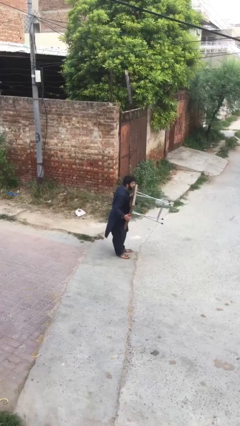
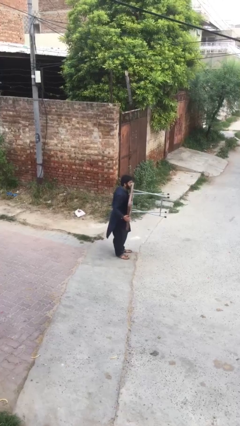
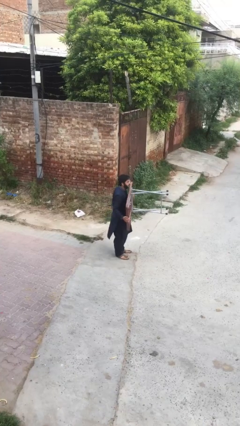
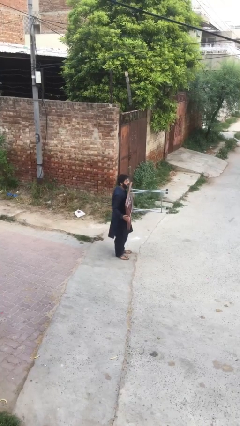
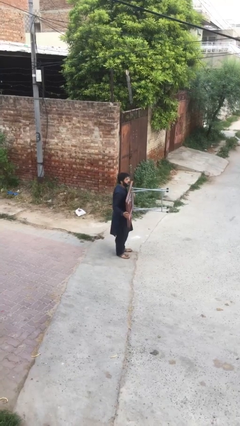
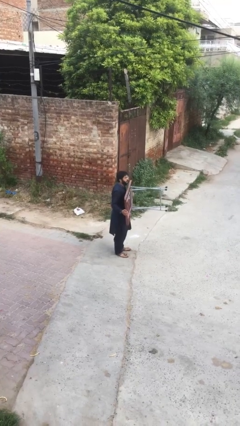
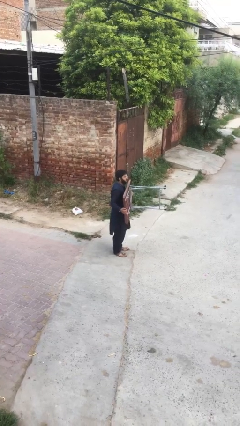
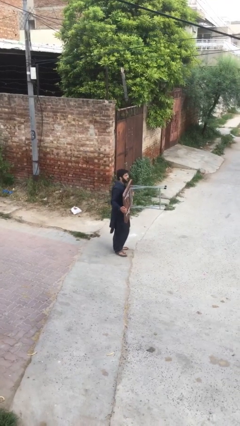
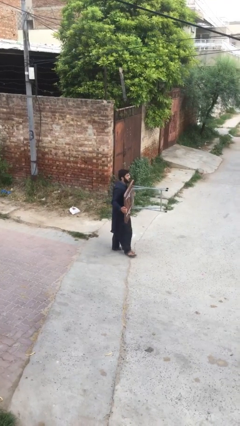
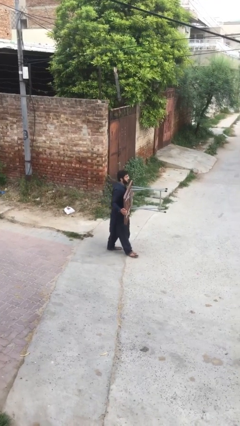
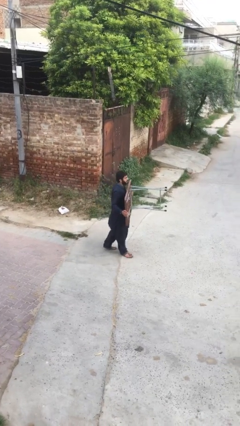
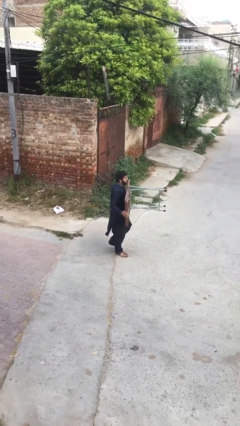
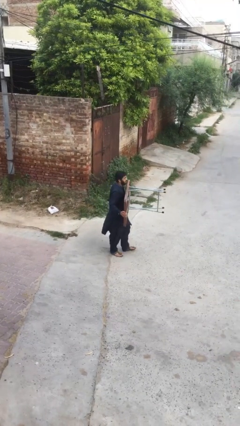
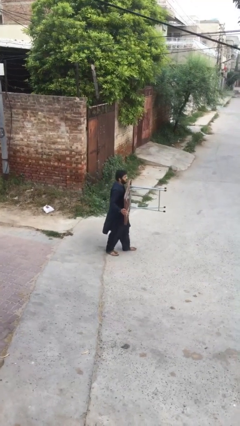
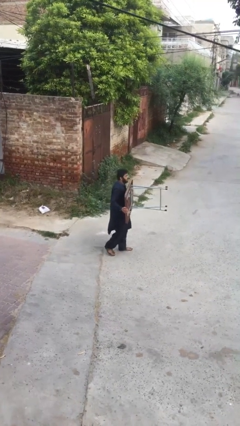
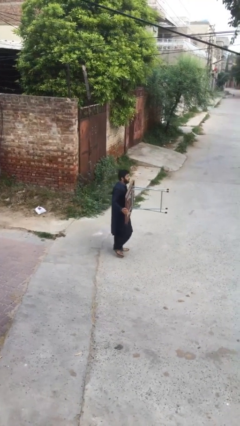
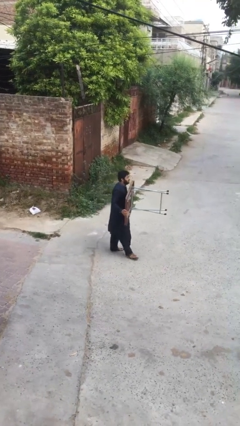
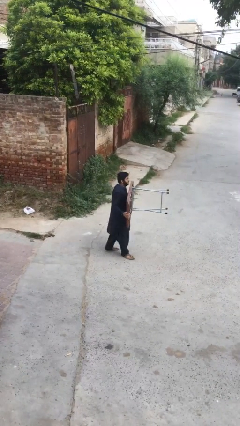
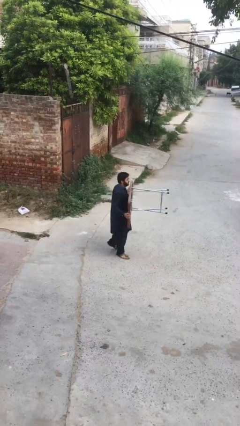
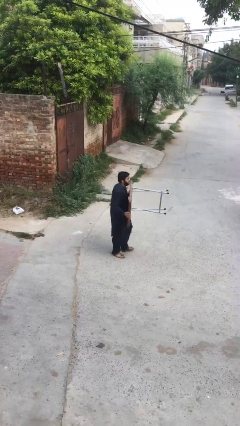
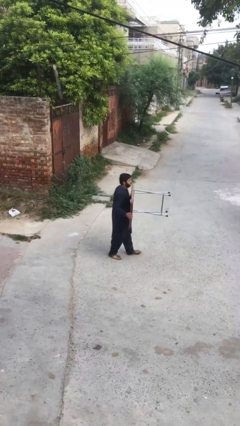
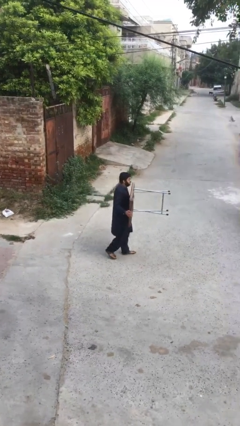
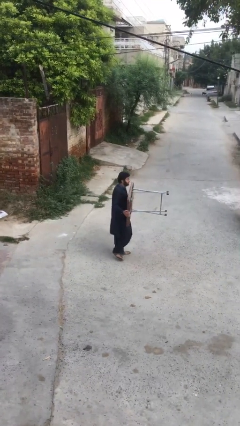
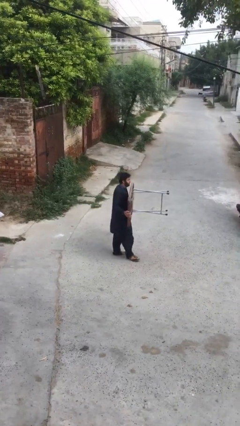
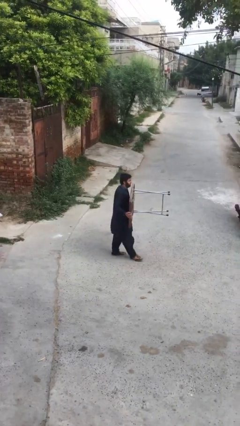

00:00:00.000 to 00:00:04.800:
person carries heavy object

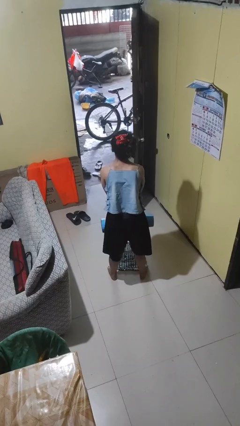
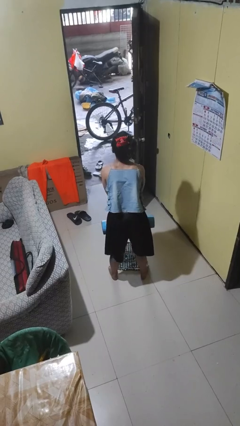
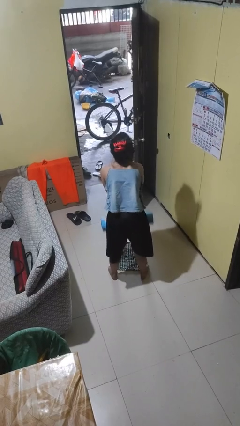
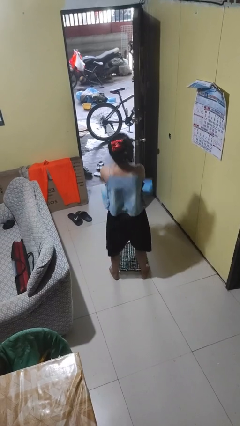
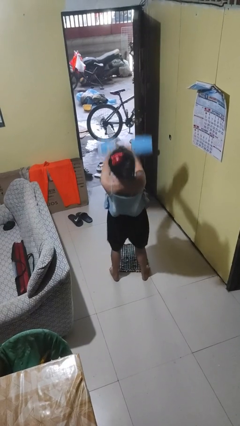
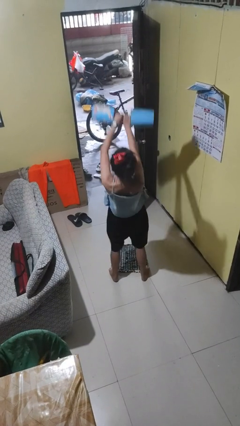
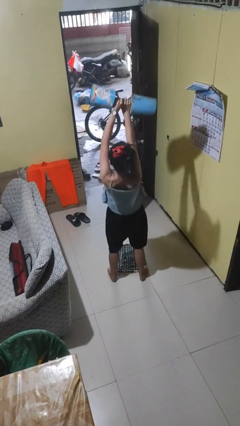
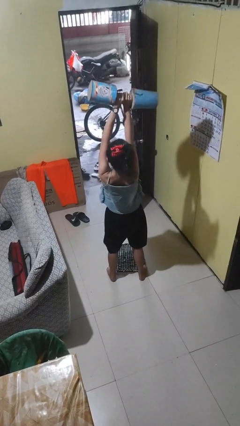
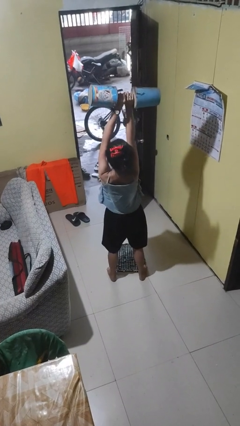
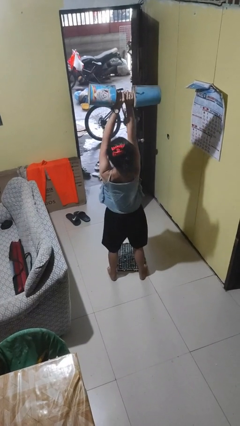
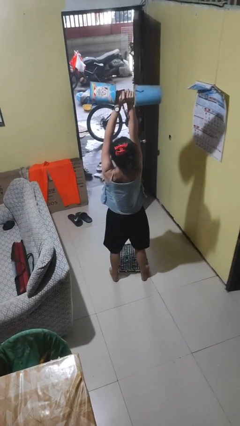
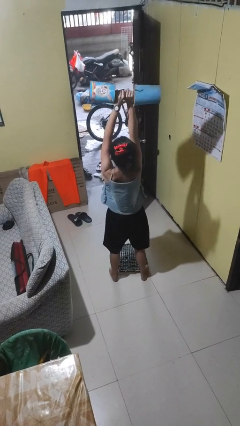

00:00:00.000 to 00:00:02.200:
person lifts dumbbells

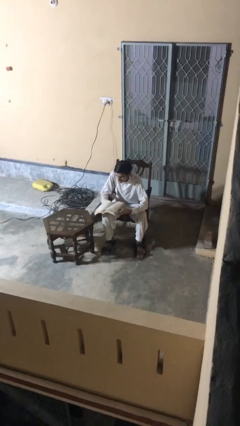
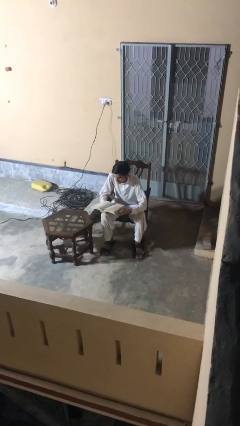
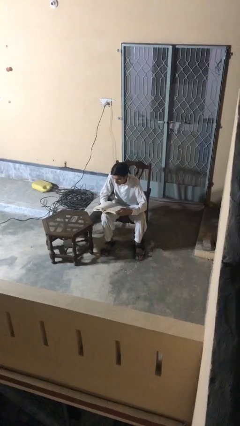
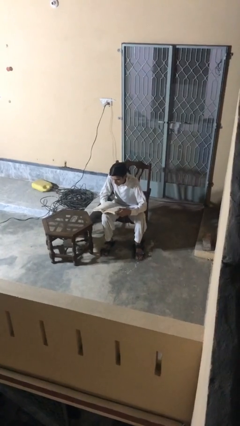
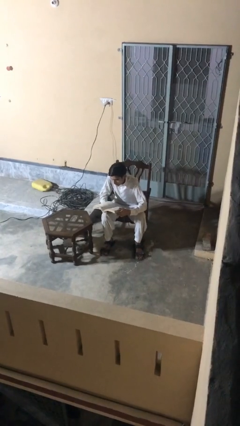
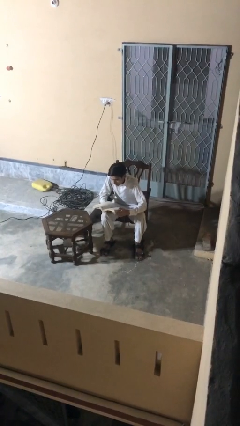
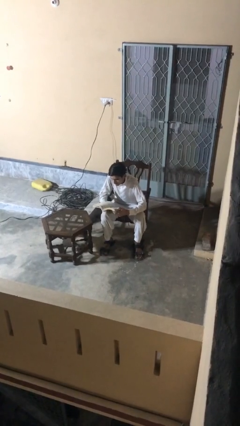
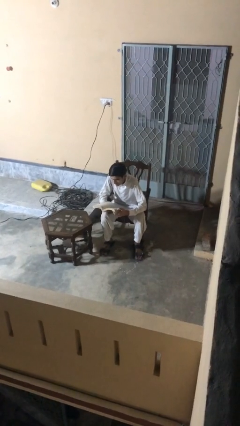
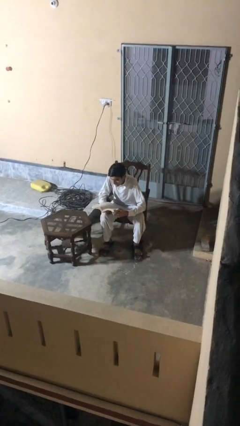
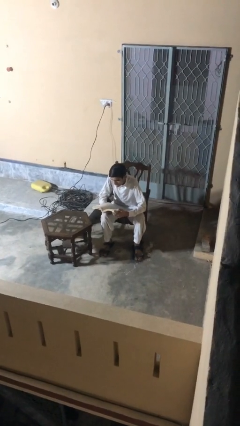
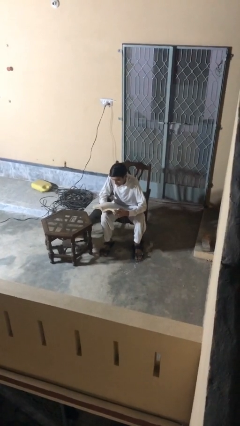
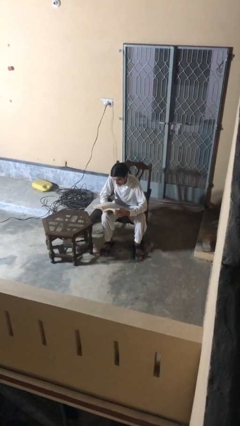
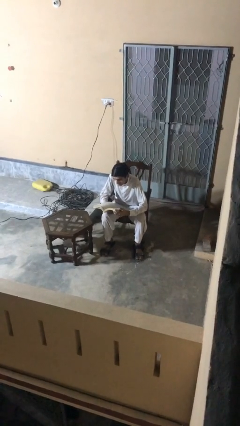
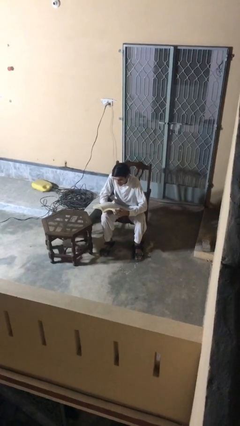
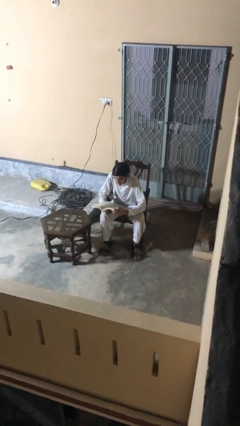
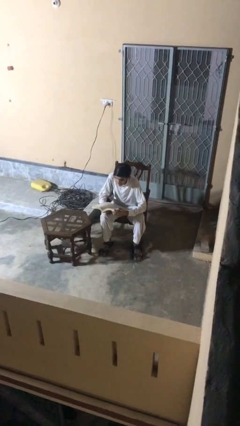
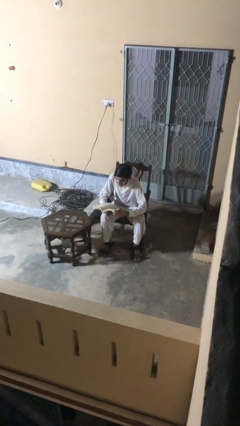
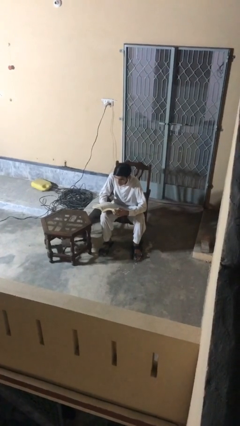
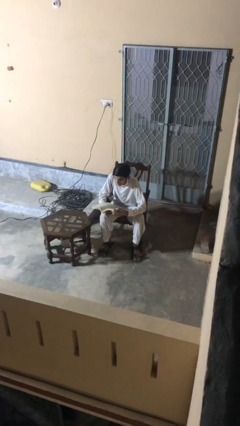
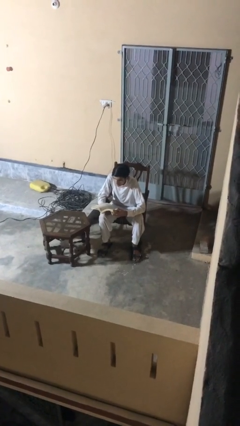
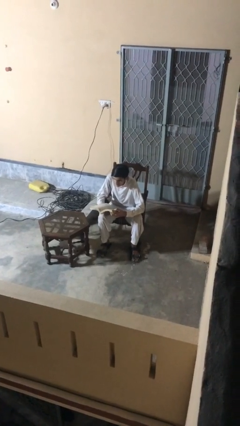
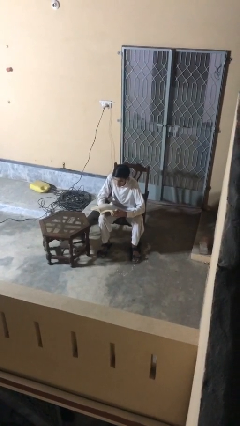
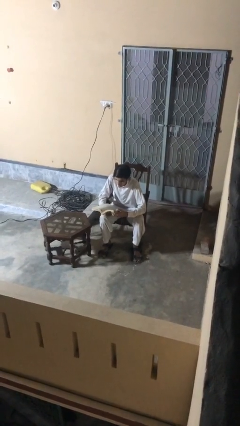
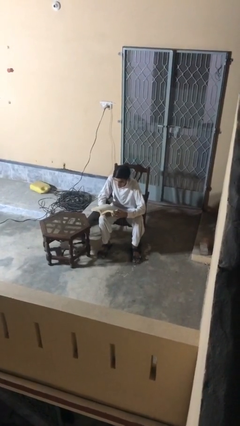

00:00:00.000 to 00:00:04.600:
person reads document

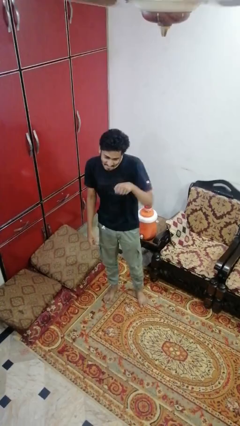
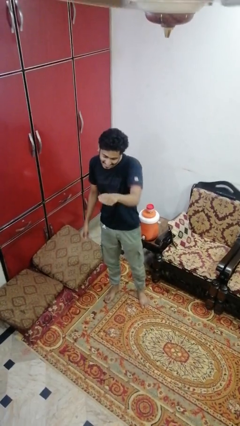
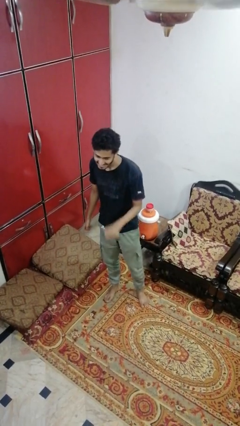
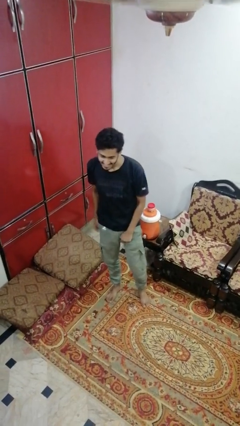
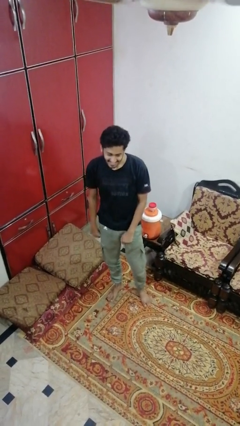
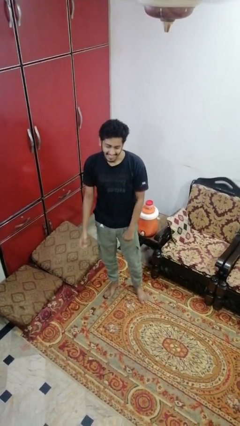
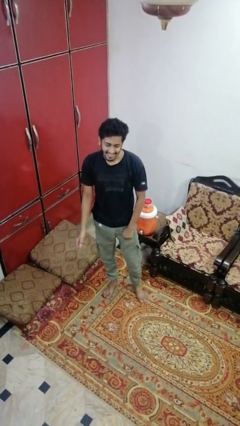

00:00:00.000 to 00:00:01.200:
person punches

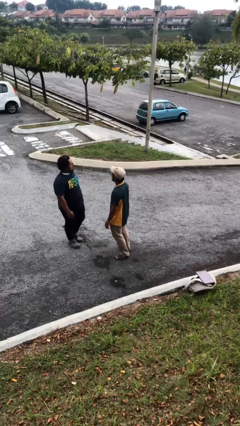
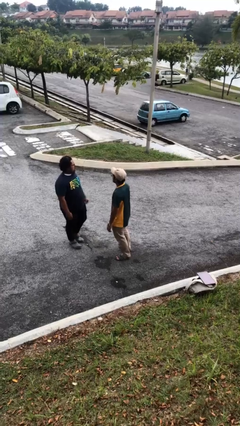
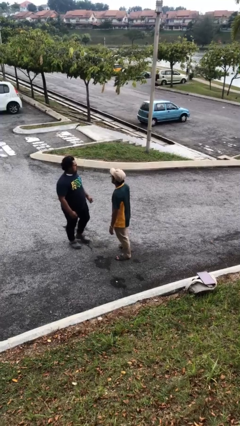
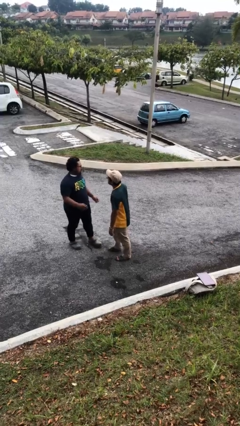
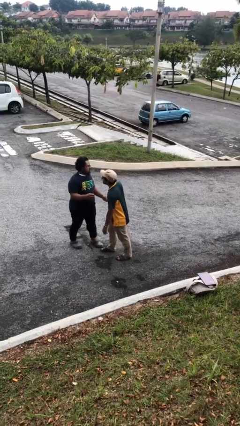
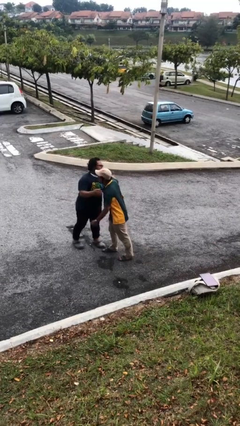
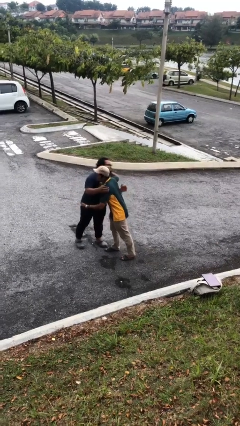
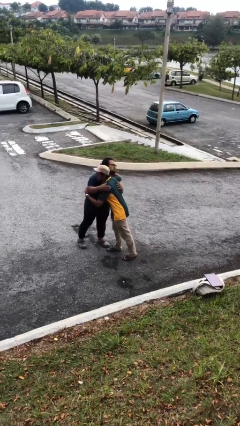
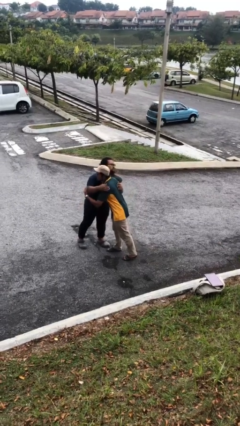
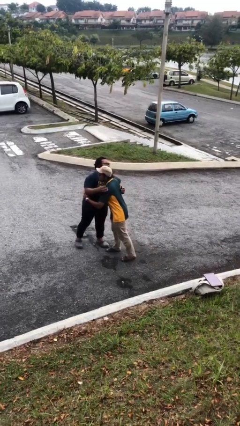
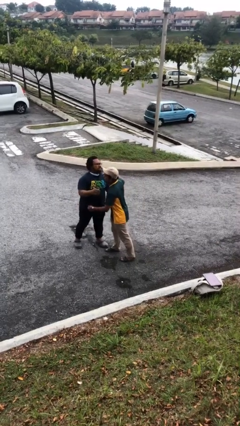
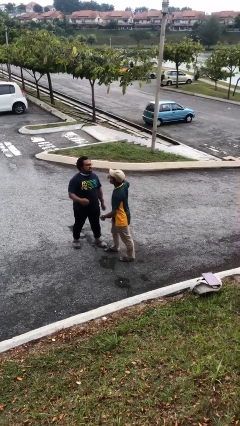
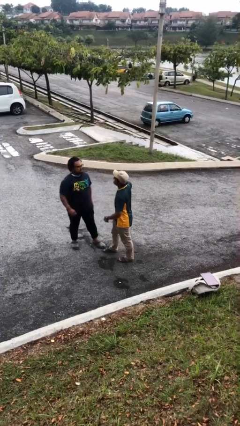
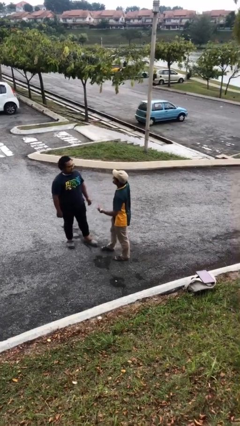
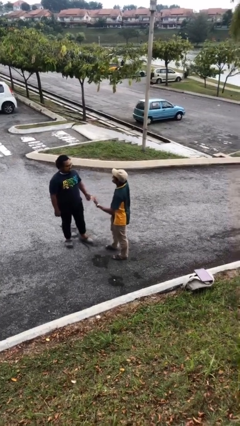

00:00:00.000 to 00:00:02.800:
person embraces person

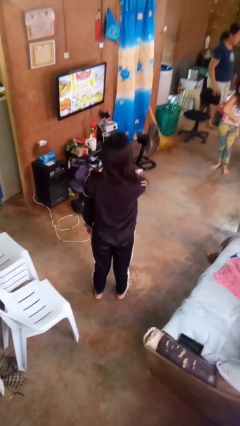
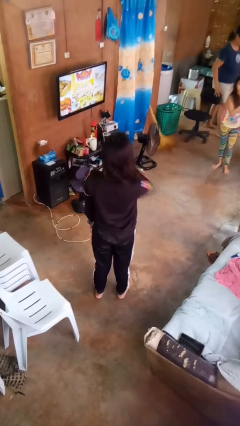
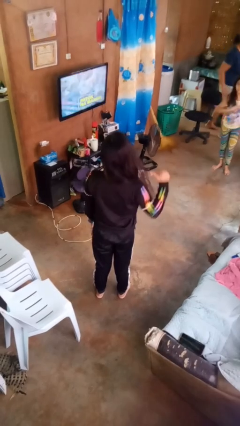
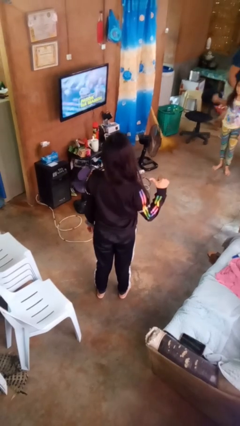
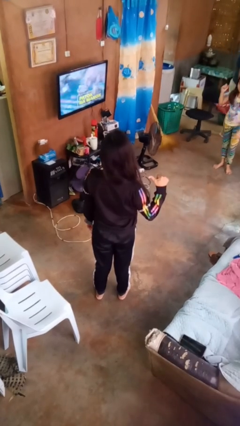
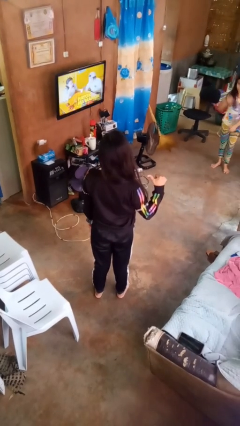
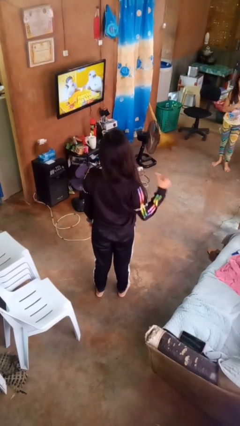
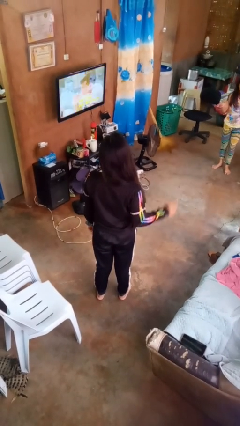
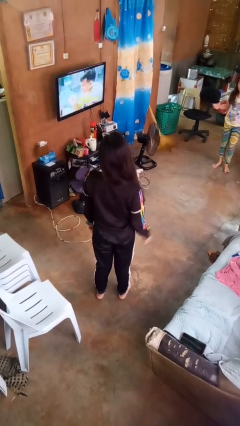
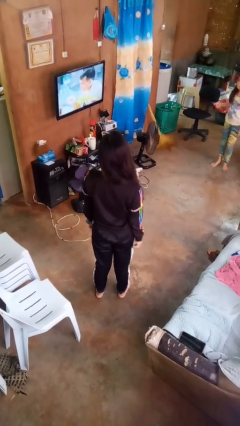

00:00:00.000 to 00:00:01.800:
person gestures cut
